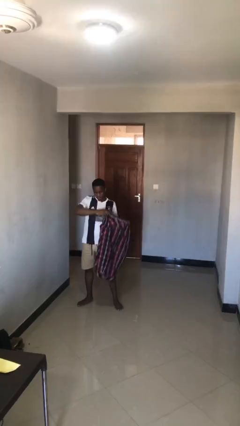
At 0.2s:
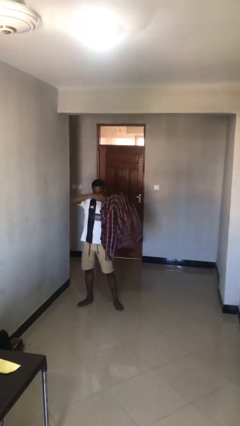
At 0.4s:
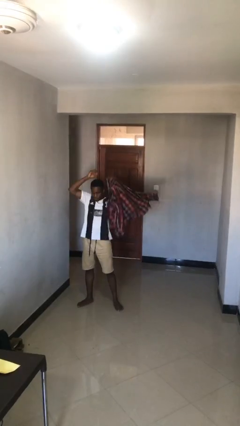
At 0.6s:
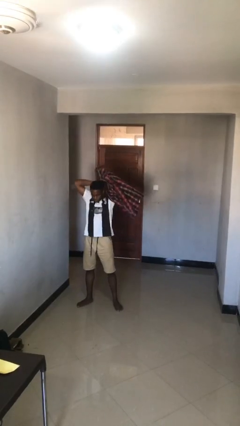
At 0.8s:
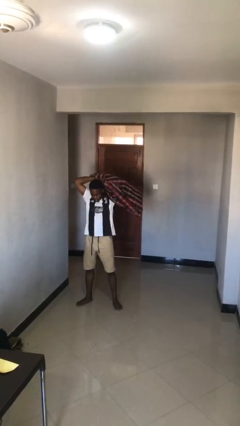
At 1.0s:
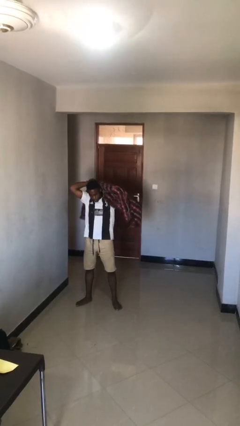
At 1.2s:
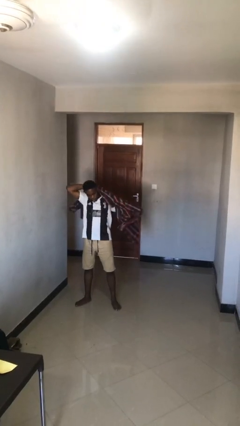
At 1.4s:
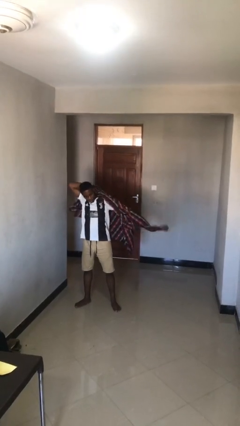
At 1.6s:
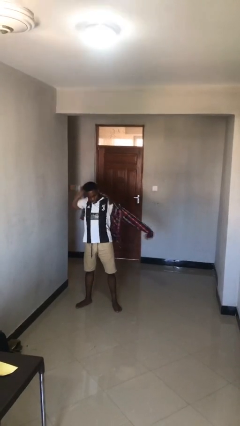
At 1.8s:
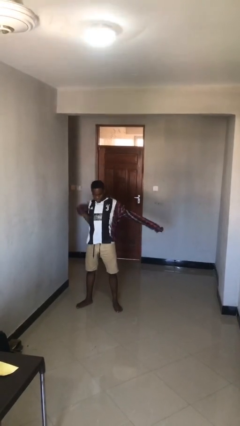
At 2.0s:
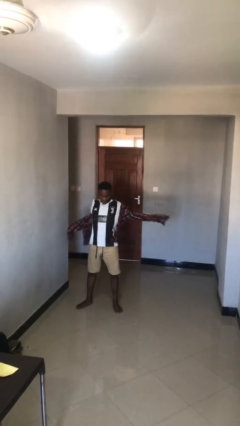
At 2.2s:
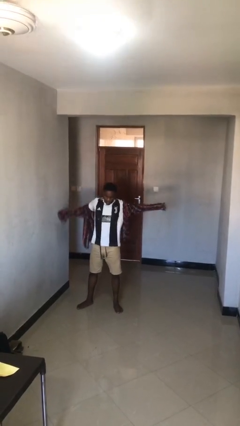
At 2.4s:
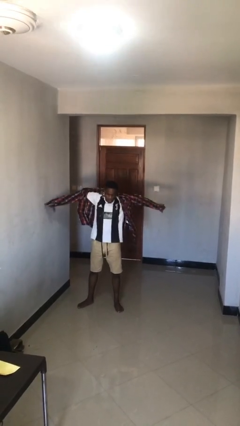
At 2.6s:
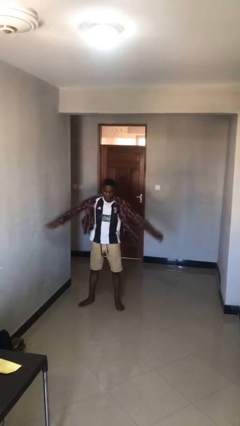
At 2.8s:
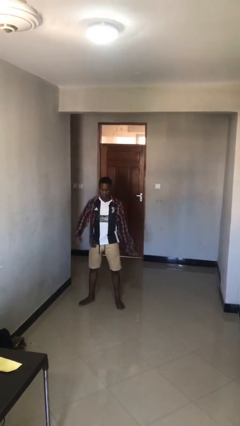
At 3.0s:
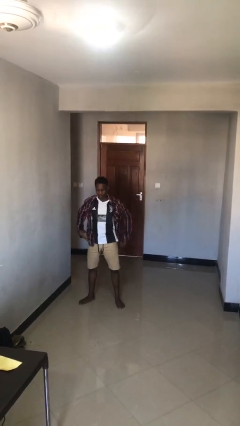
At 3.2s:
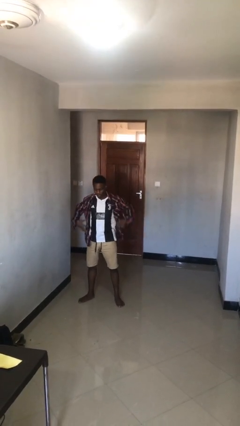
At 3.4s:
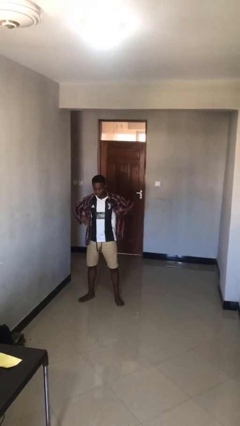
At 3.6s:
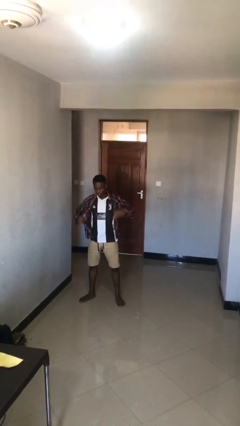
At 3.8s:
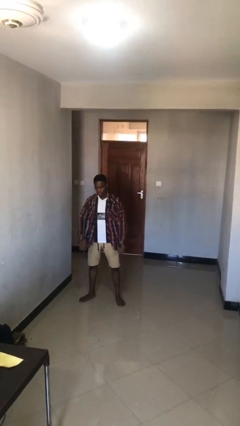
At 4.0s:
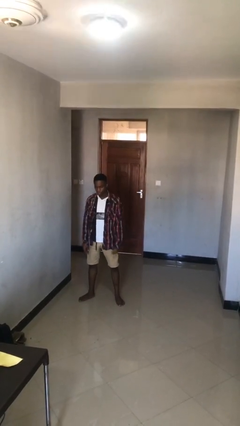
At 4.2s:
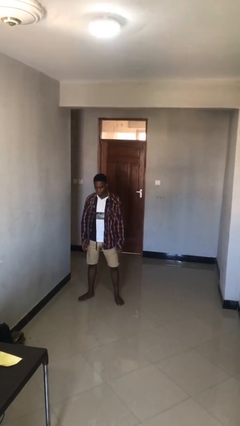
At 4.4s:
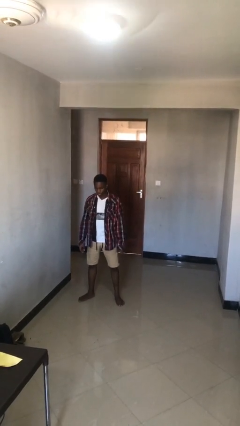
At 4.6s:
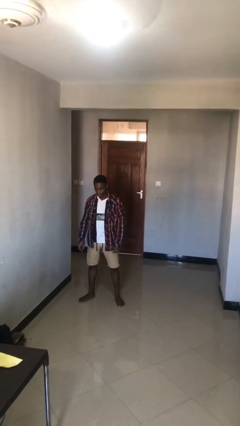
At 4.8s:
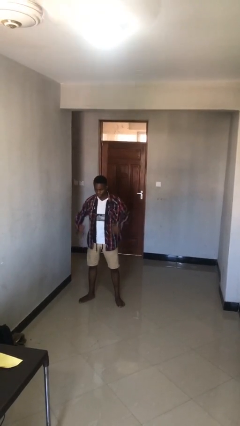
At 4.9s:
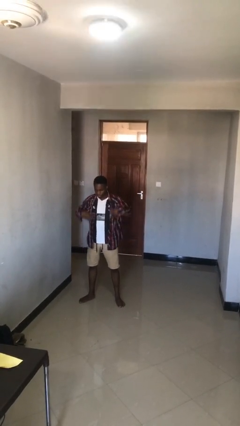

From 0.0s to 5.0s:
person puts on shirt

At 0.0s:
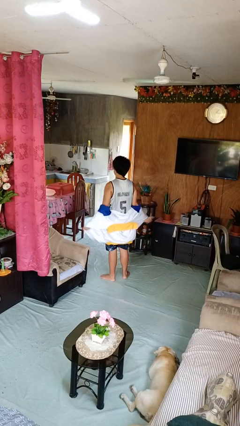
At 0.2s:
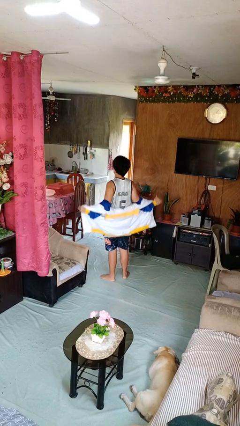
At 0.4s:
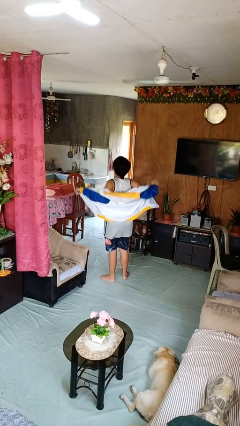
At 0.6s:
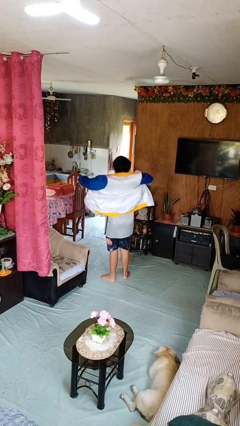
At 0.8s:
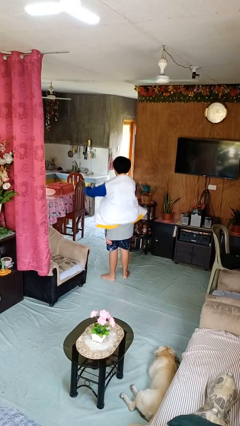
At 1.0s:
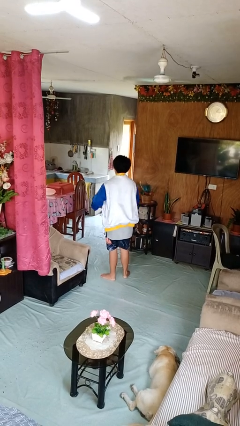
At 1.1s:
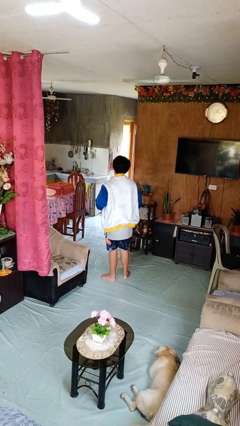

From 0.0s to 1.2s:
person puts on jacket

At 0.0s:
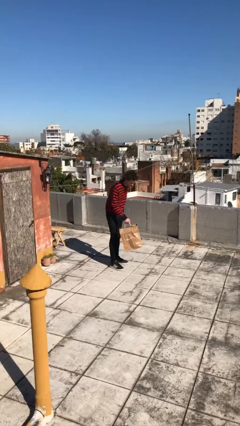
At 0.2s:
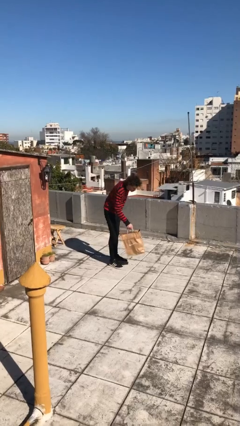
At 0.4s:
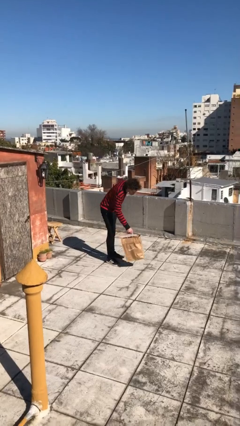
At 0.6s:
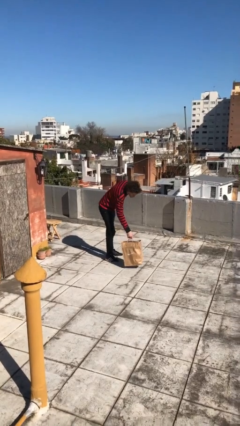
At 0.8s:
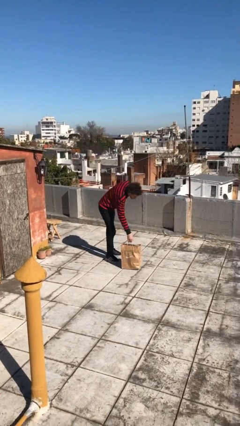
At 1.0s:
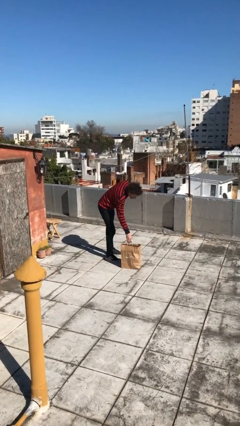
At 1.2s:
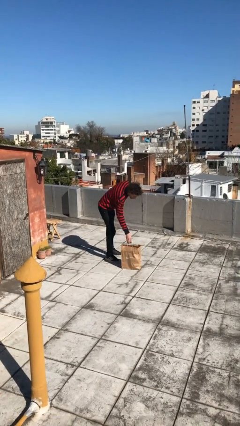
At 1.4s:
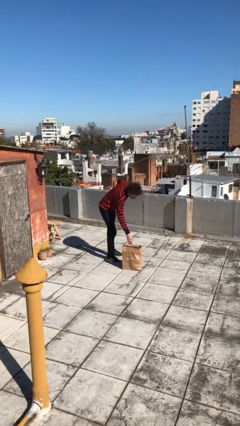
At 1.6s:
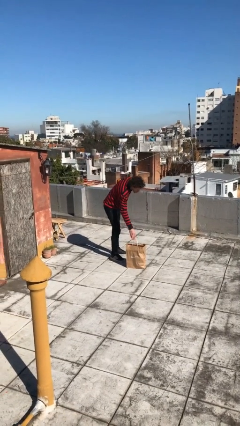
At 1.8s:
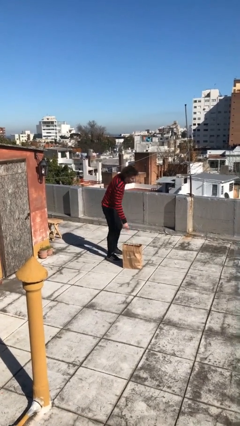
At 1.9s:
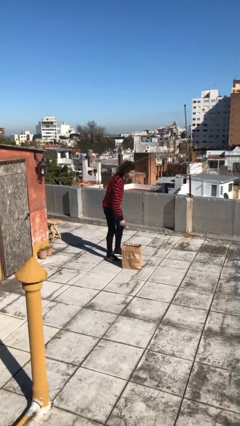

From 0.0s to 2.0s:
person puts down object on floor

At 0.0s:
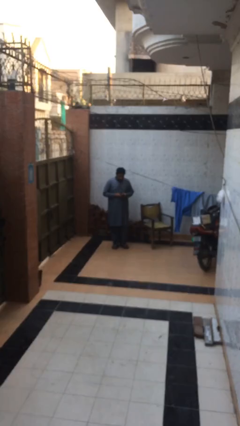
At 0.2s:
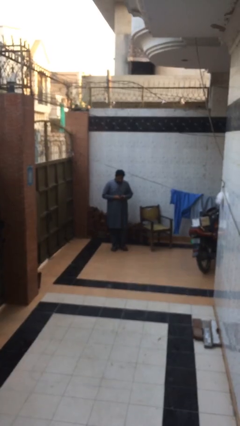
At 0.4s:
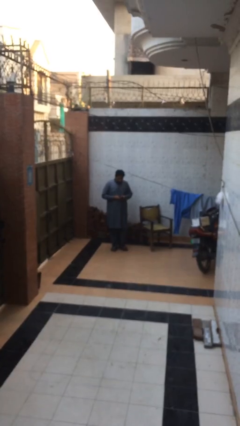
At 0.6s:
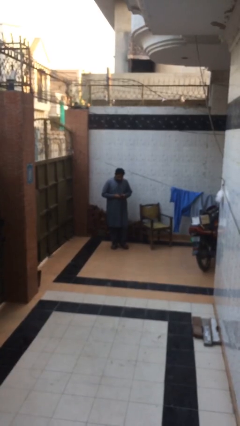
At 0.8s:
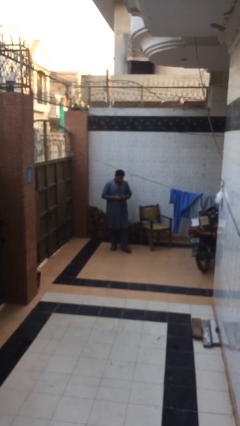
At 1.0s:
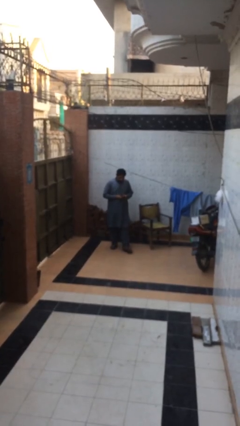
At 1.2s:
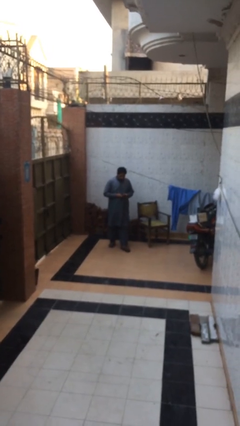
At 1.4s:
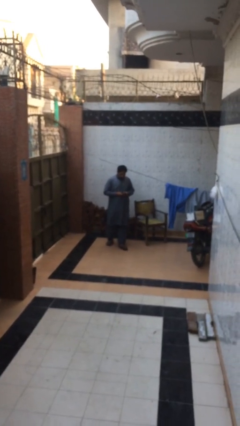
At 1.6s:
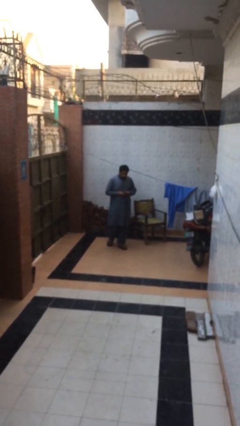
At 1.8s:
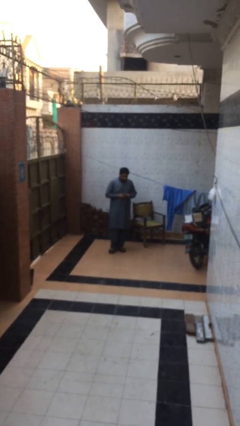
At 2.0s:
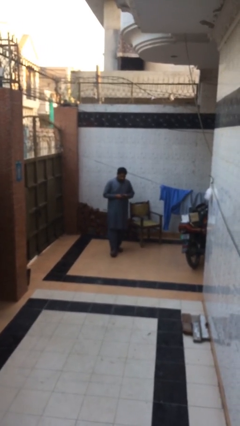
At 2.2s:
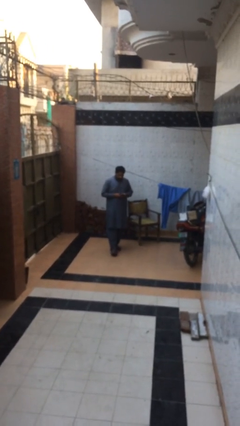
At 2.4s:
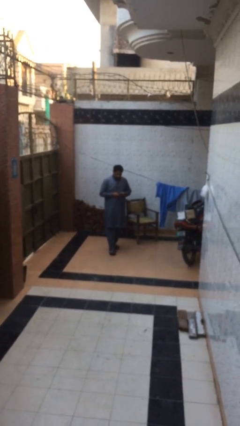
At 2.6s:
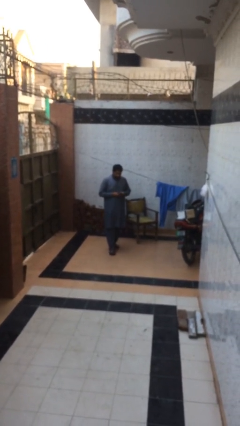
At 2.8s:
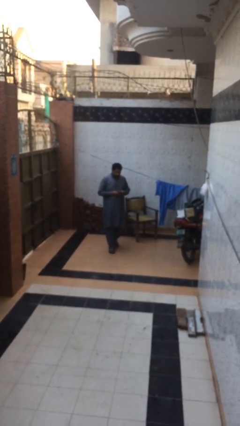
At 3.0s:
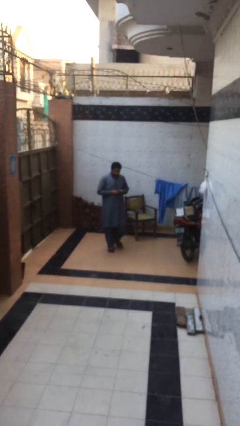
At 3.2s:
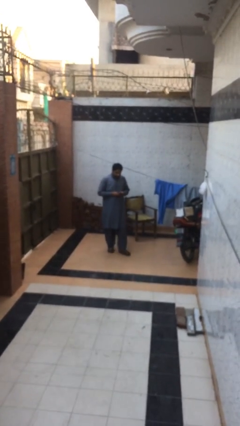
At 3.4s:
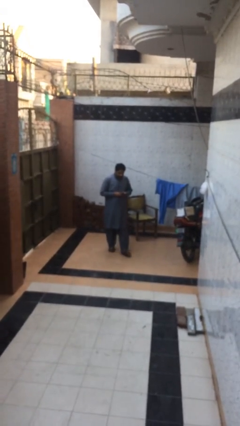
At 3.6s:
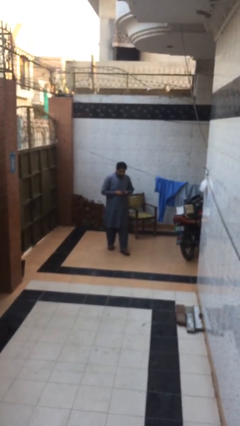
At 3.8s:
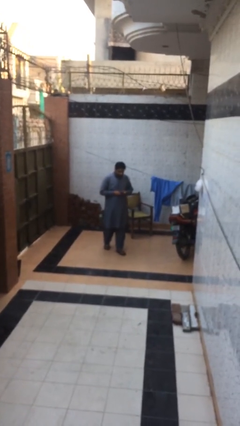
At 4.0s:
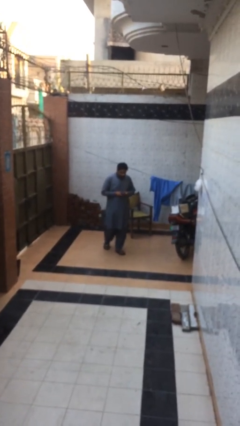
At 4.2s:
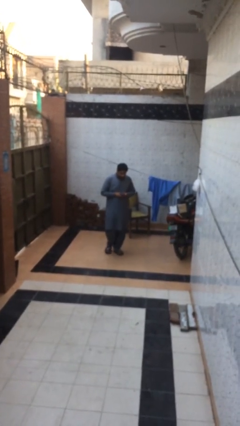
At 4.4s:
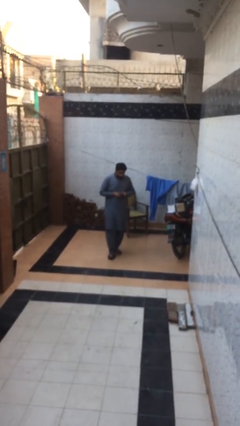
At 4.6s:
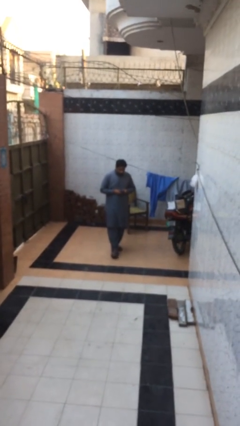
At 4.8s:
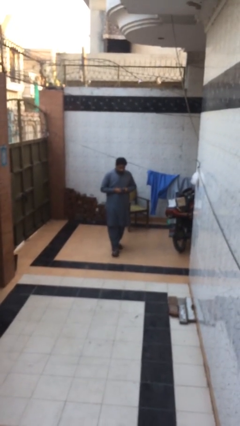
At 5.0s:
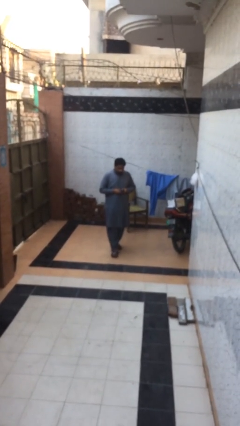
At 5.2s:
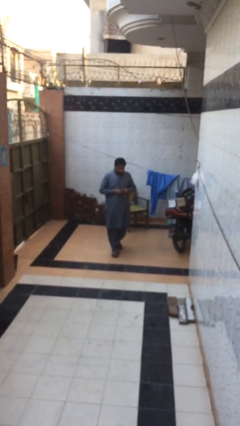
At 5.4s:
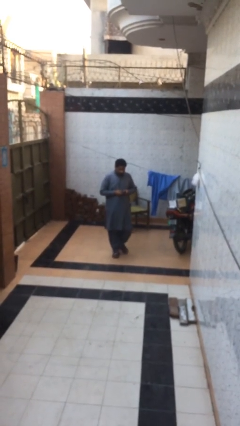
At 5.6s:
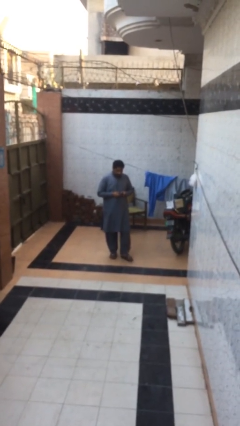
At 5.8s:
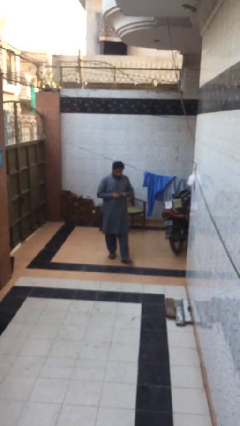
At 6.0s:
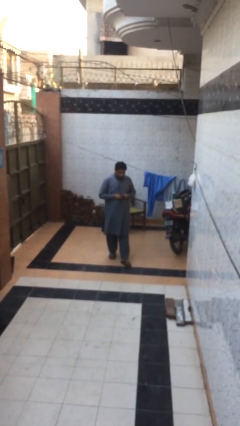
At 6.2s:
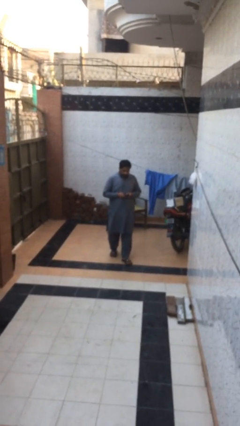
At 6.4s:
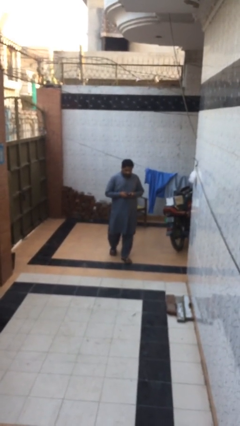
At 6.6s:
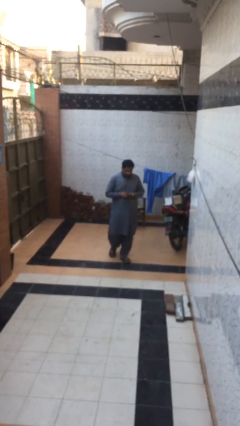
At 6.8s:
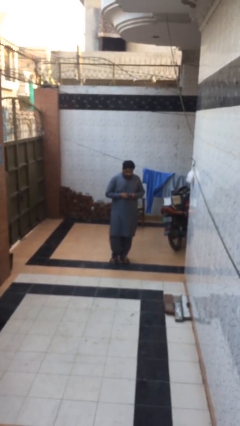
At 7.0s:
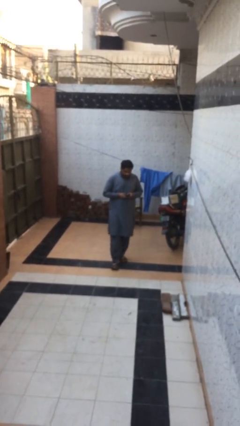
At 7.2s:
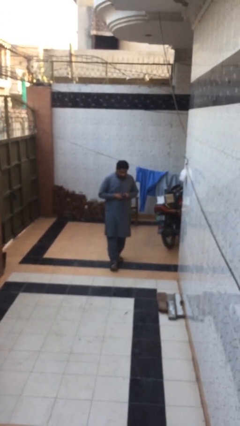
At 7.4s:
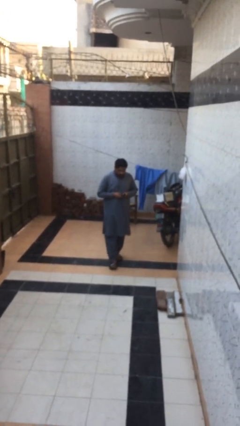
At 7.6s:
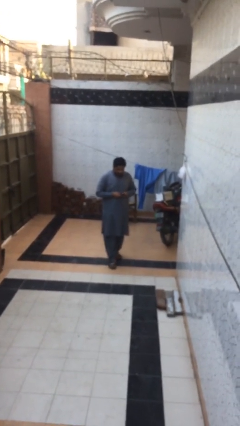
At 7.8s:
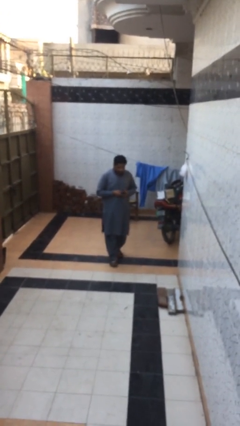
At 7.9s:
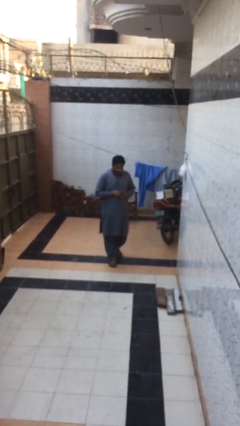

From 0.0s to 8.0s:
person texts on phone

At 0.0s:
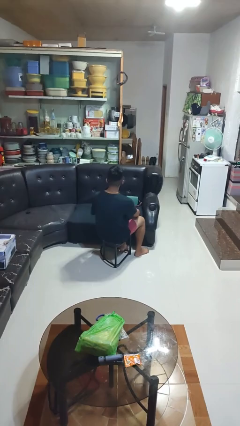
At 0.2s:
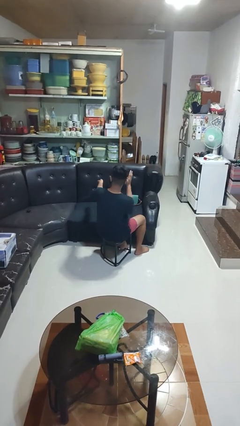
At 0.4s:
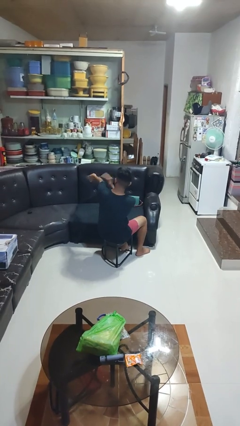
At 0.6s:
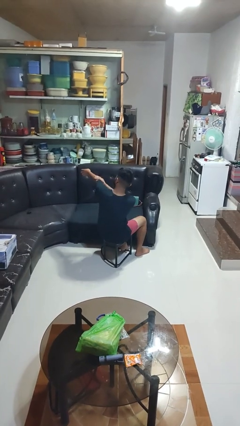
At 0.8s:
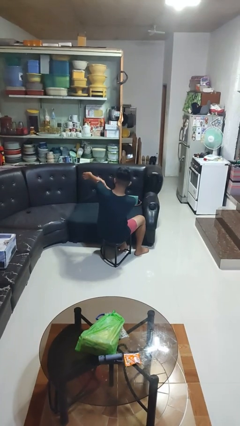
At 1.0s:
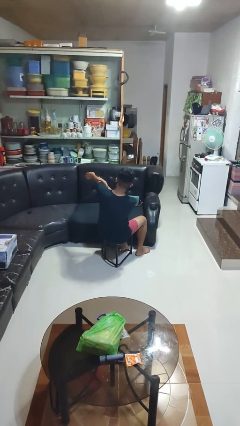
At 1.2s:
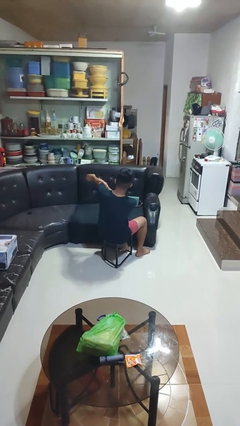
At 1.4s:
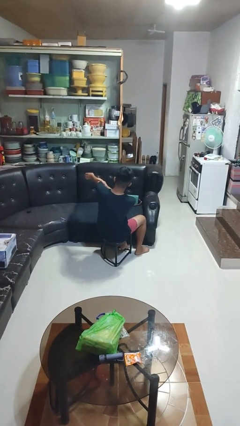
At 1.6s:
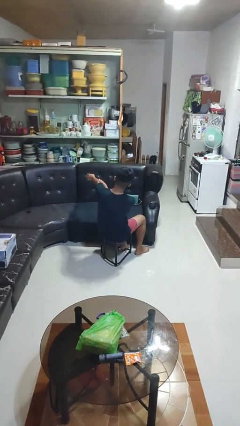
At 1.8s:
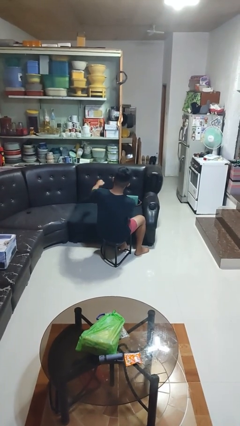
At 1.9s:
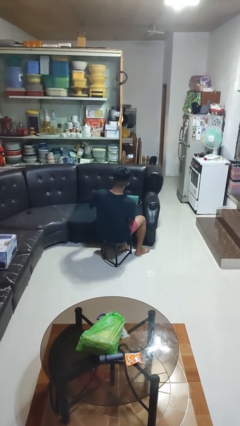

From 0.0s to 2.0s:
person swats bug
